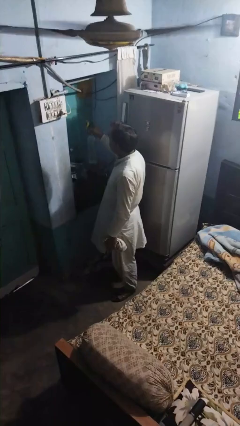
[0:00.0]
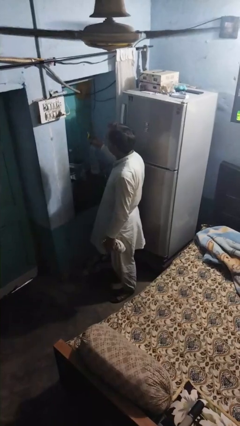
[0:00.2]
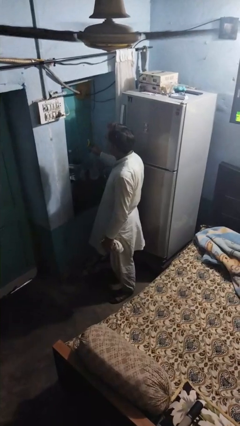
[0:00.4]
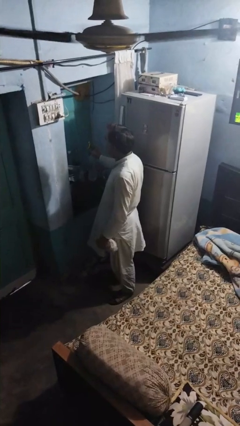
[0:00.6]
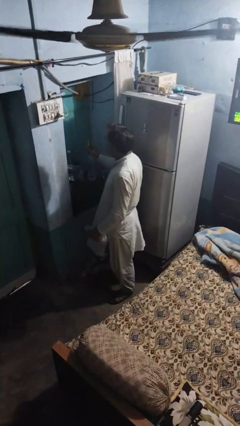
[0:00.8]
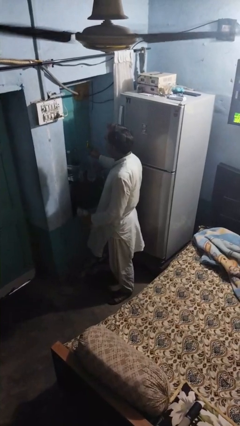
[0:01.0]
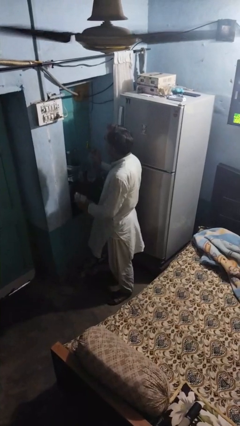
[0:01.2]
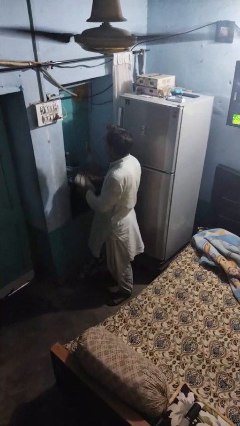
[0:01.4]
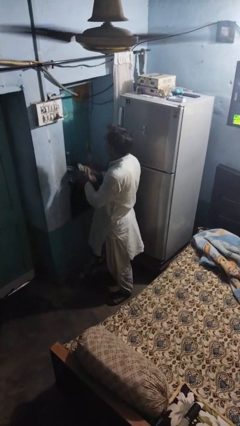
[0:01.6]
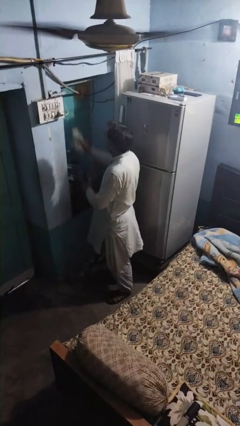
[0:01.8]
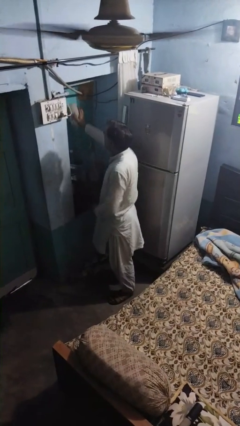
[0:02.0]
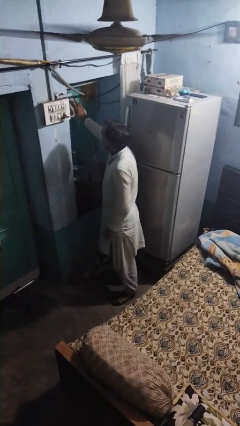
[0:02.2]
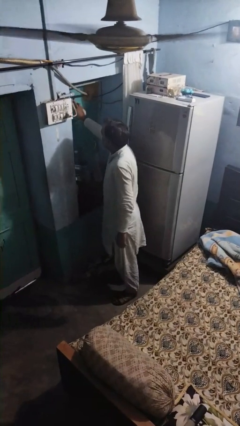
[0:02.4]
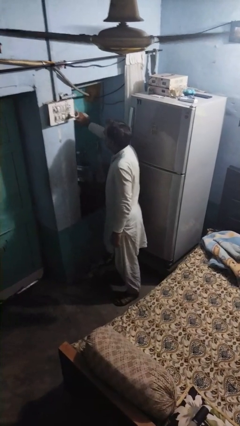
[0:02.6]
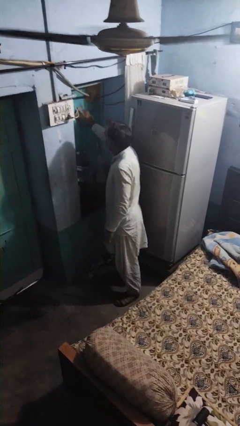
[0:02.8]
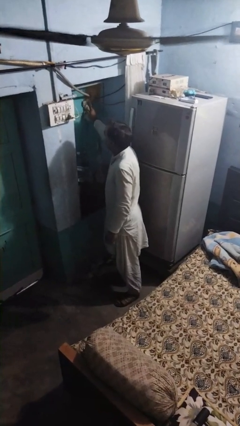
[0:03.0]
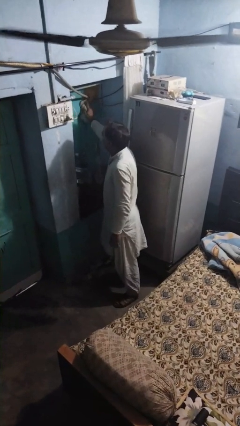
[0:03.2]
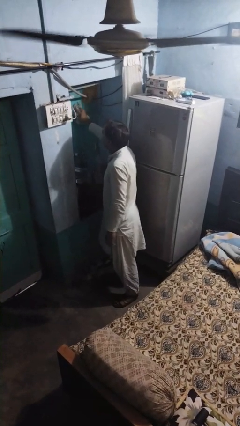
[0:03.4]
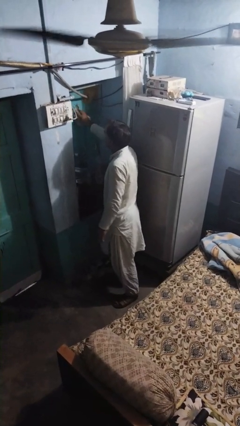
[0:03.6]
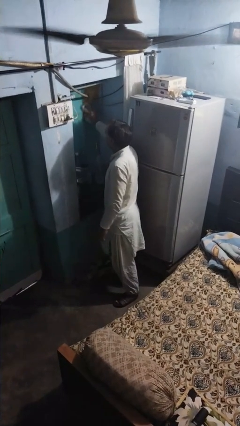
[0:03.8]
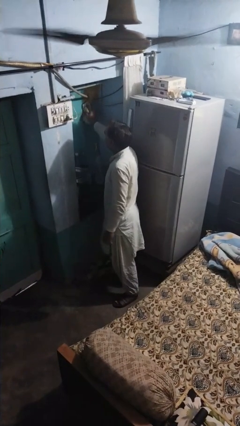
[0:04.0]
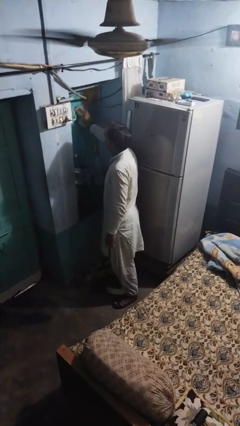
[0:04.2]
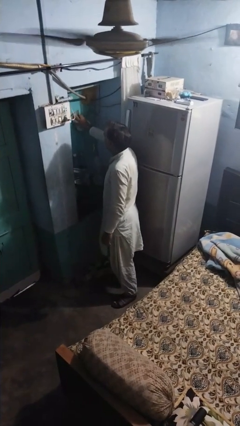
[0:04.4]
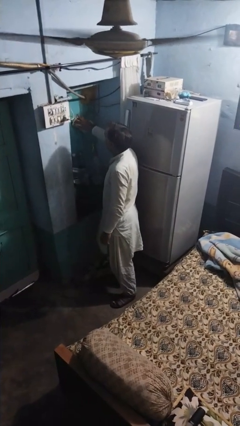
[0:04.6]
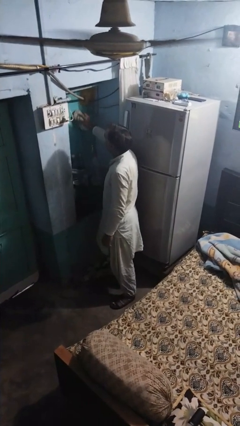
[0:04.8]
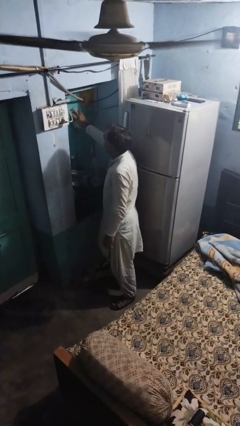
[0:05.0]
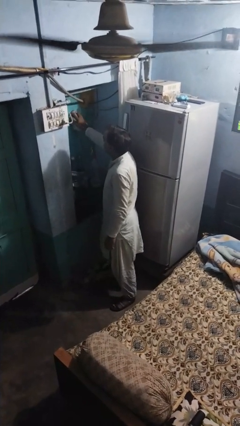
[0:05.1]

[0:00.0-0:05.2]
person washes window

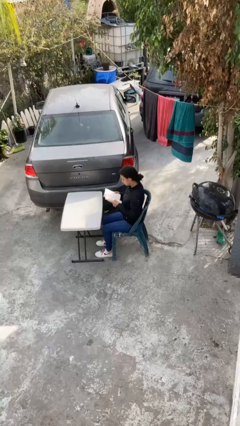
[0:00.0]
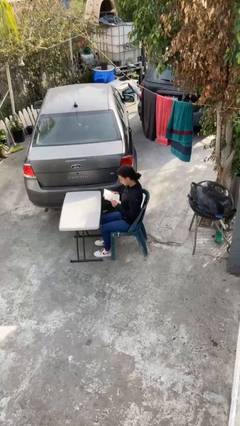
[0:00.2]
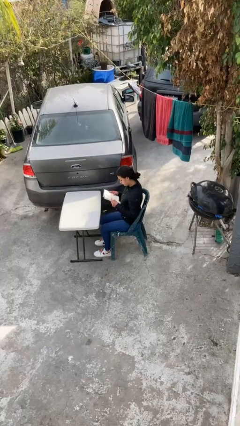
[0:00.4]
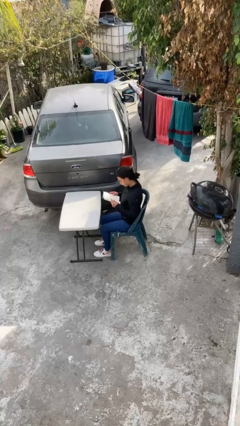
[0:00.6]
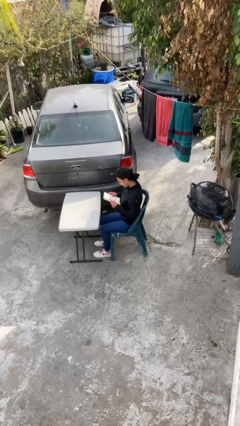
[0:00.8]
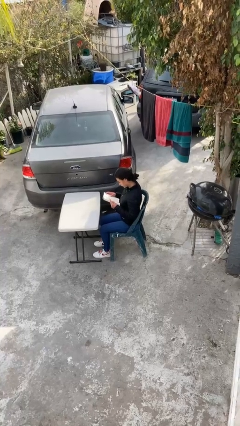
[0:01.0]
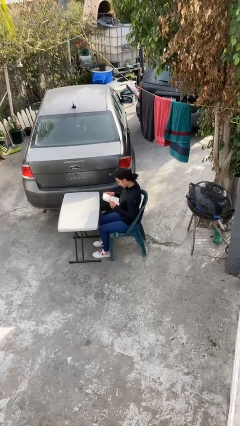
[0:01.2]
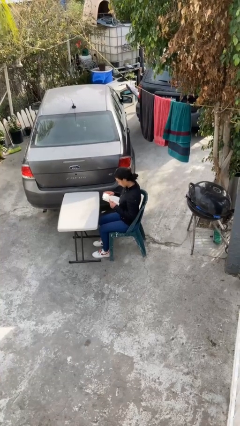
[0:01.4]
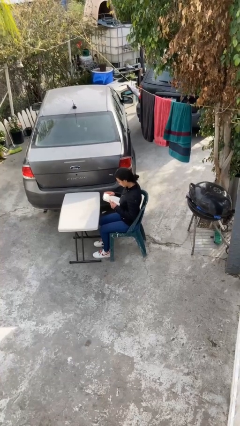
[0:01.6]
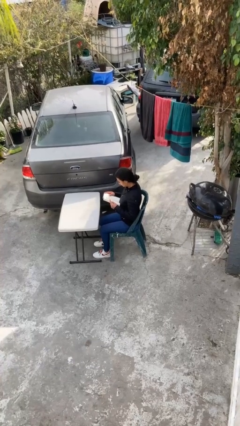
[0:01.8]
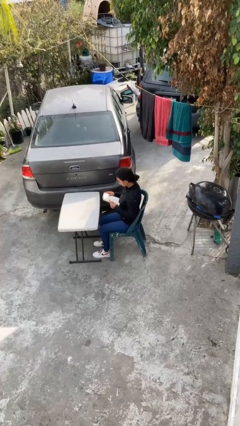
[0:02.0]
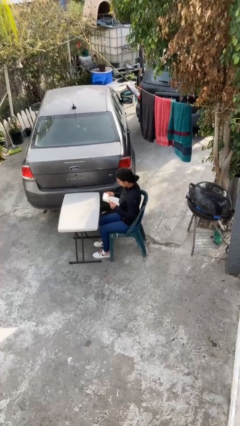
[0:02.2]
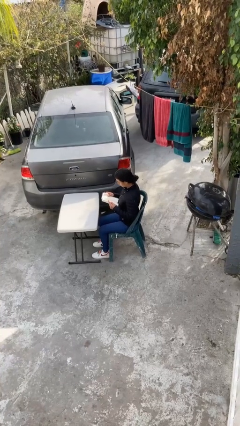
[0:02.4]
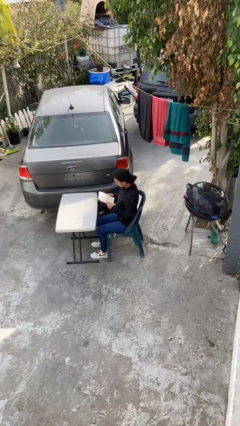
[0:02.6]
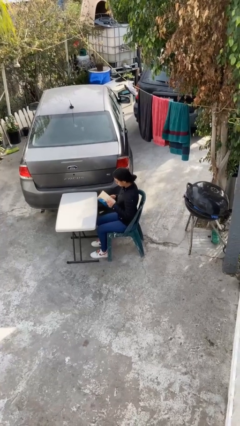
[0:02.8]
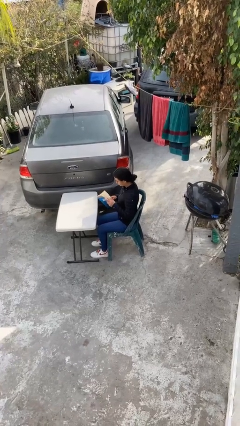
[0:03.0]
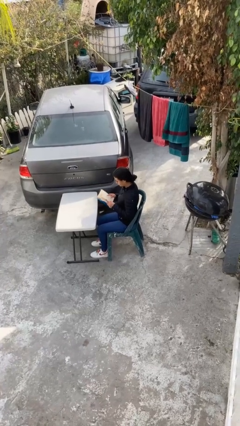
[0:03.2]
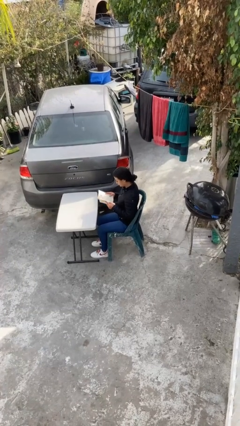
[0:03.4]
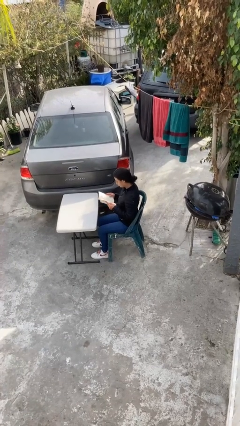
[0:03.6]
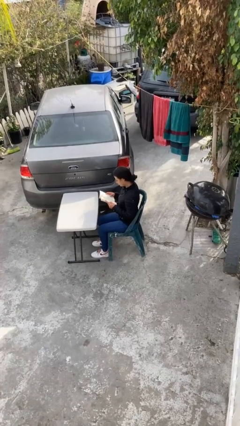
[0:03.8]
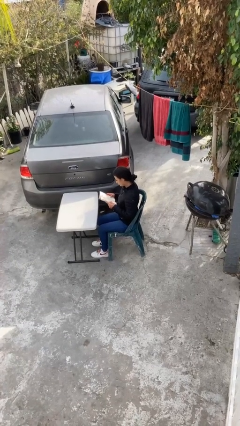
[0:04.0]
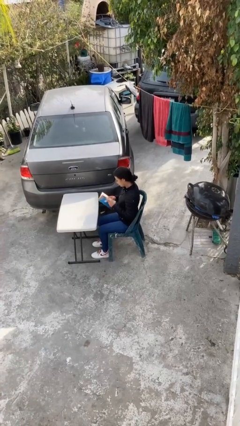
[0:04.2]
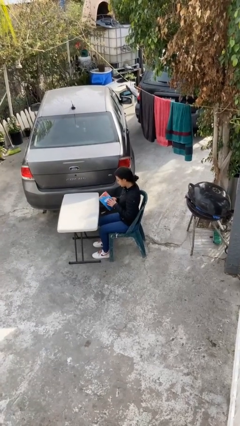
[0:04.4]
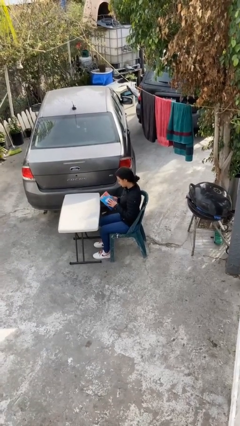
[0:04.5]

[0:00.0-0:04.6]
person reads document

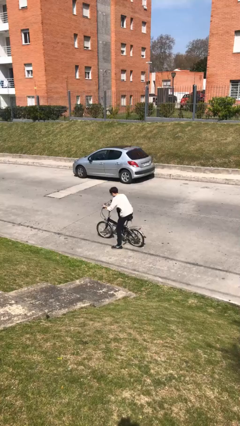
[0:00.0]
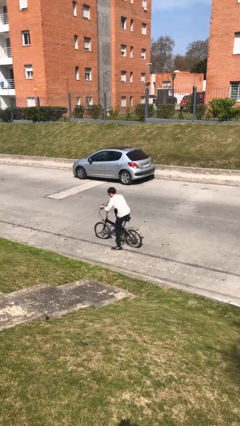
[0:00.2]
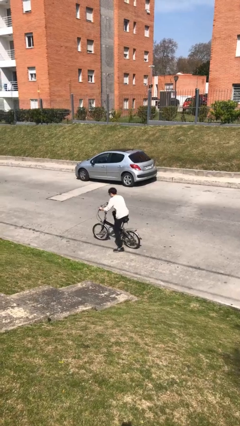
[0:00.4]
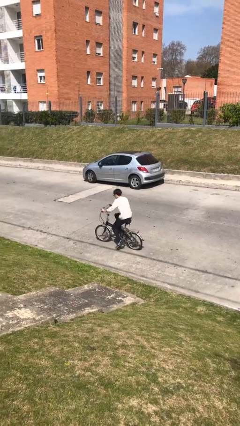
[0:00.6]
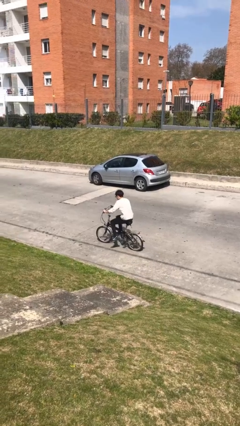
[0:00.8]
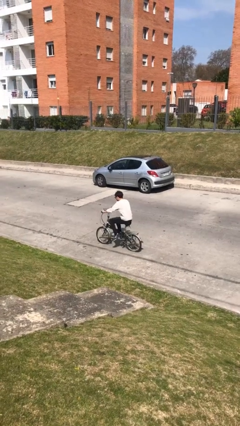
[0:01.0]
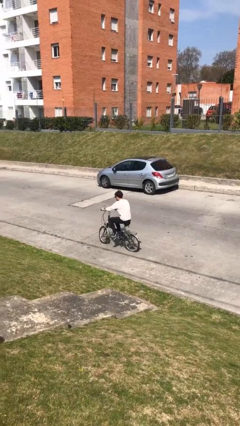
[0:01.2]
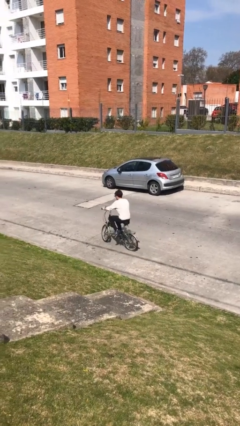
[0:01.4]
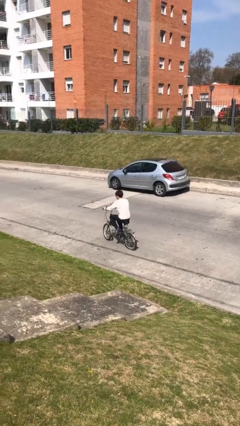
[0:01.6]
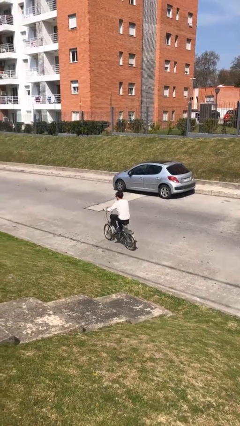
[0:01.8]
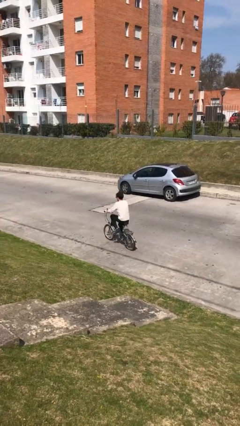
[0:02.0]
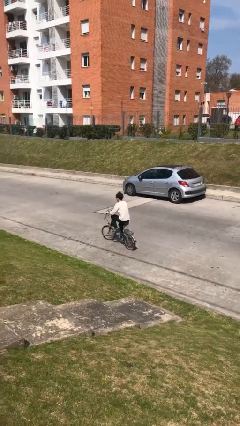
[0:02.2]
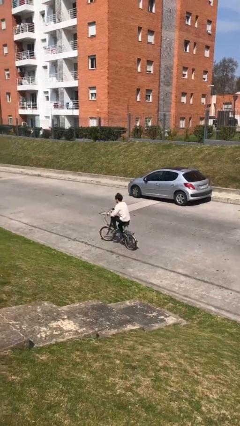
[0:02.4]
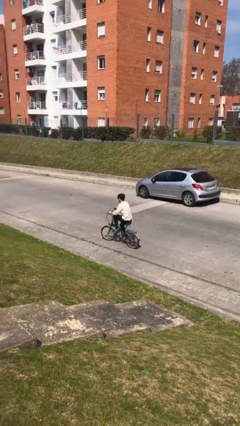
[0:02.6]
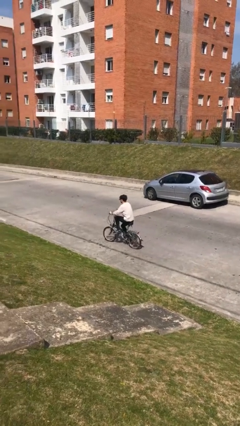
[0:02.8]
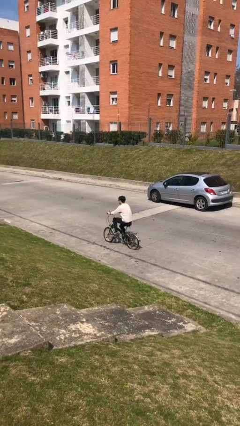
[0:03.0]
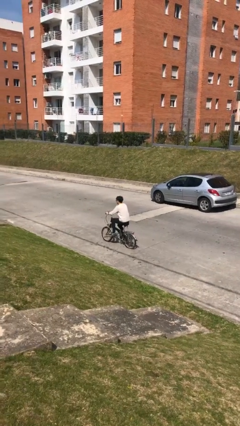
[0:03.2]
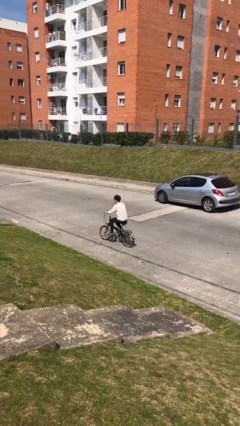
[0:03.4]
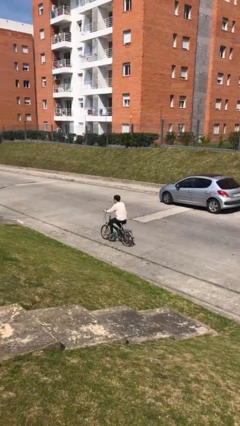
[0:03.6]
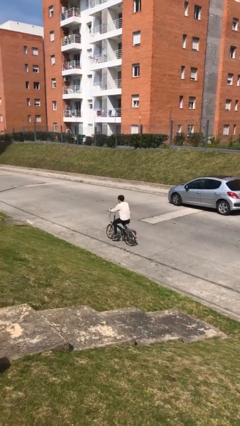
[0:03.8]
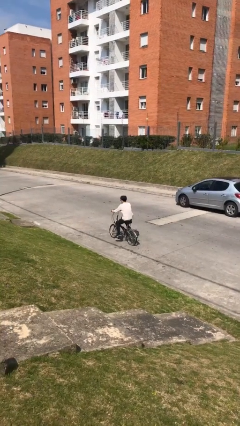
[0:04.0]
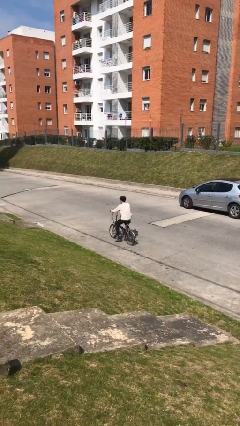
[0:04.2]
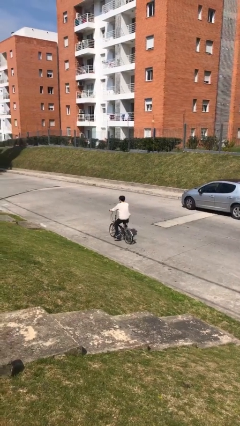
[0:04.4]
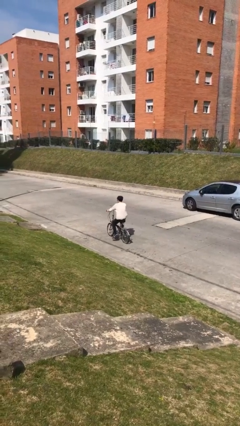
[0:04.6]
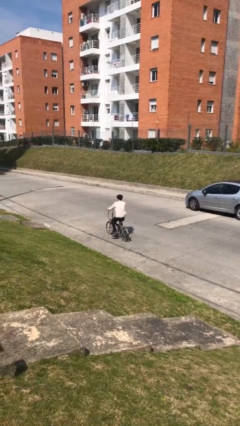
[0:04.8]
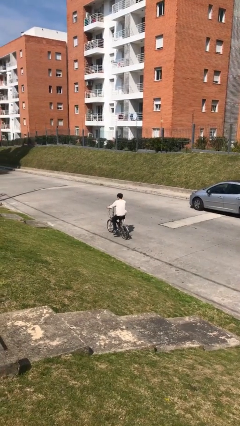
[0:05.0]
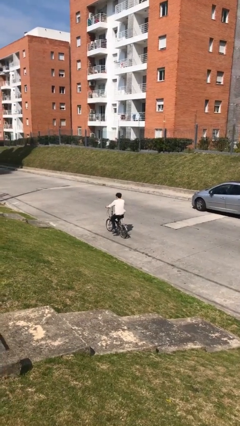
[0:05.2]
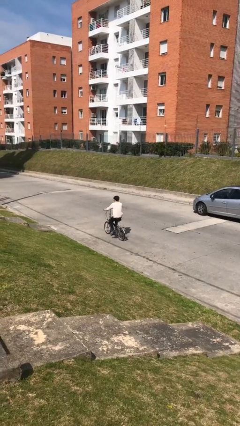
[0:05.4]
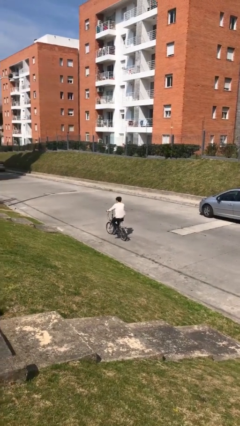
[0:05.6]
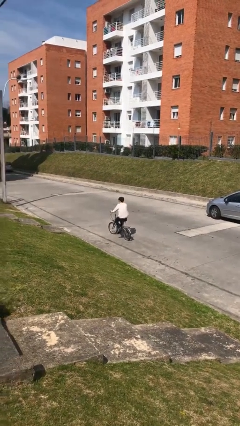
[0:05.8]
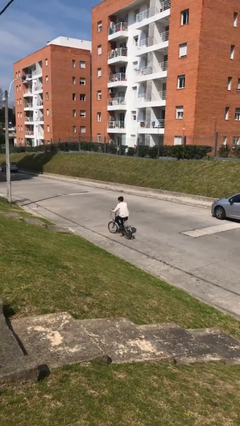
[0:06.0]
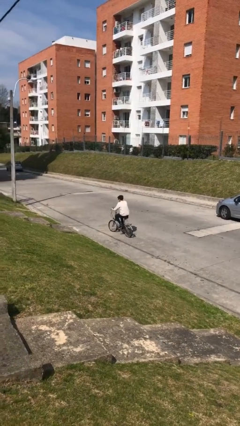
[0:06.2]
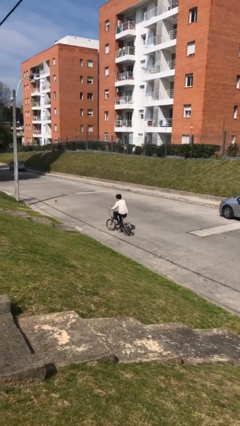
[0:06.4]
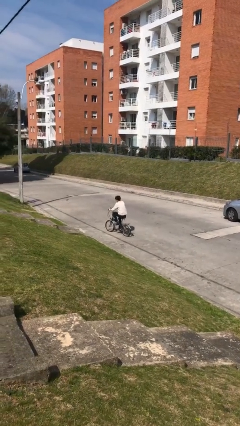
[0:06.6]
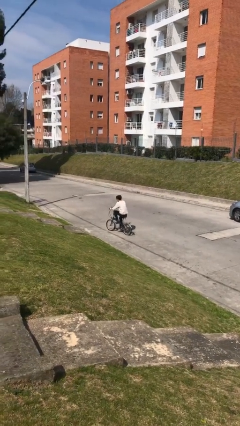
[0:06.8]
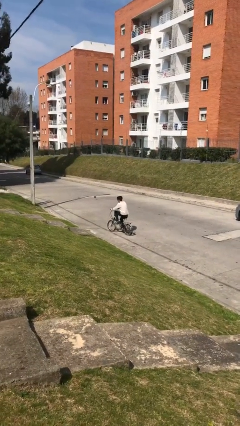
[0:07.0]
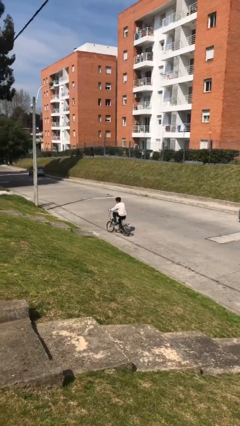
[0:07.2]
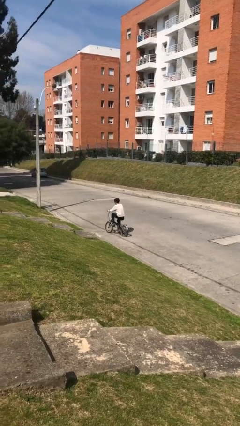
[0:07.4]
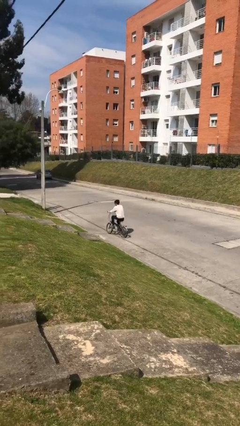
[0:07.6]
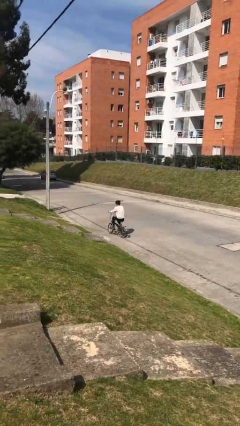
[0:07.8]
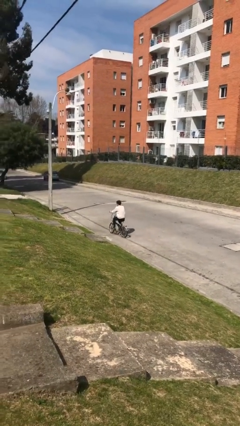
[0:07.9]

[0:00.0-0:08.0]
person rides bicycle
